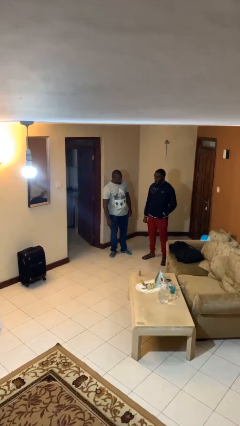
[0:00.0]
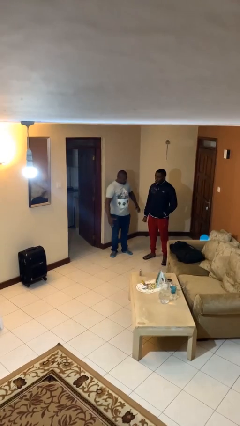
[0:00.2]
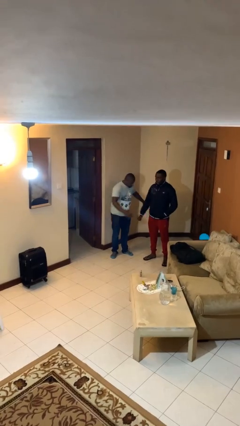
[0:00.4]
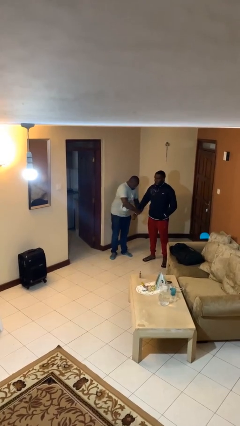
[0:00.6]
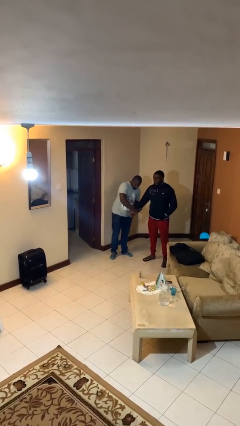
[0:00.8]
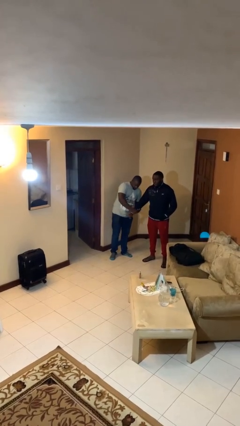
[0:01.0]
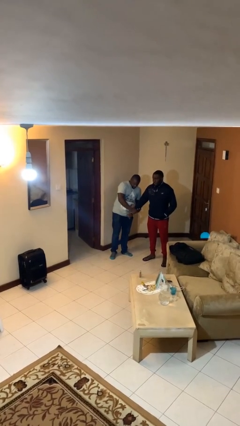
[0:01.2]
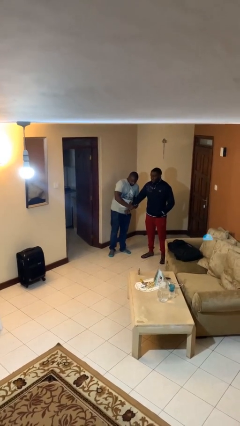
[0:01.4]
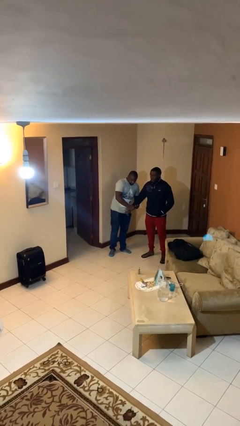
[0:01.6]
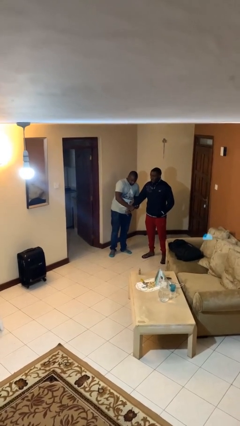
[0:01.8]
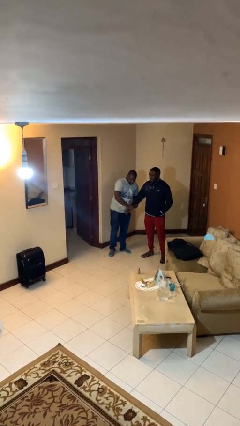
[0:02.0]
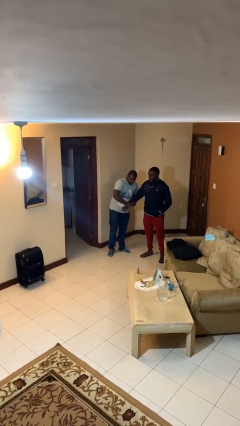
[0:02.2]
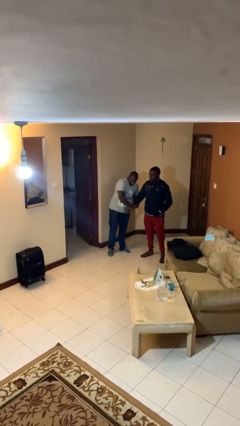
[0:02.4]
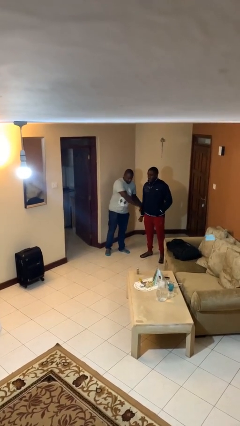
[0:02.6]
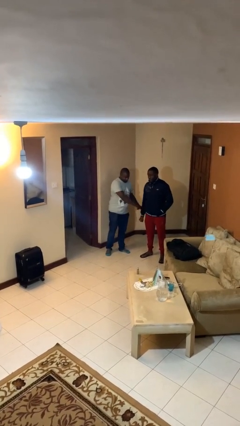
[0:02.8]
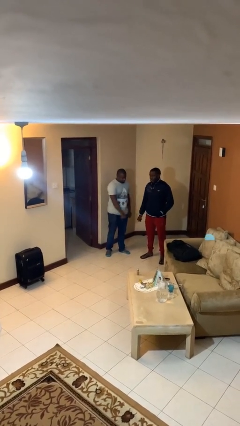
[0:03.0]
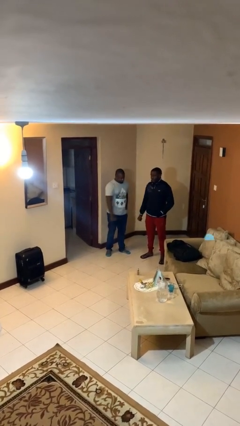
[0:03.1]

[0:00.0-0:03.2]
person grabs person by forearm

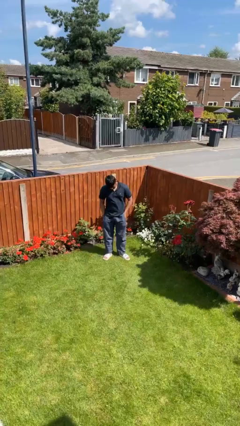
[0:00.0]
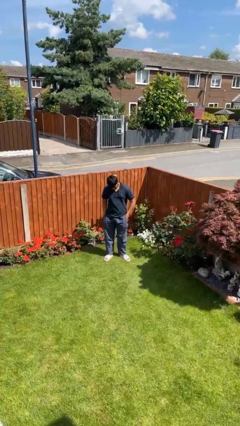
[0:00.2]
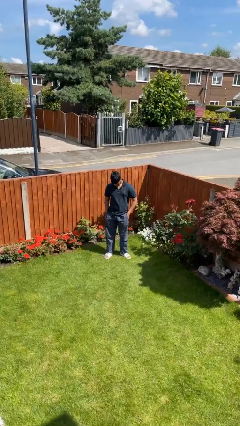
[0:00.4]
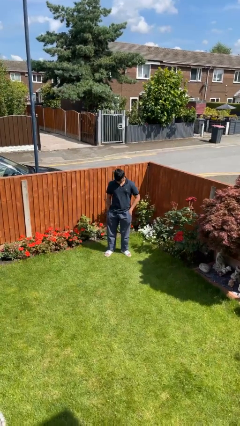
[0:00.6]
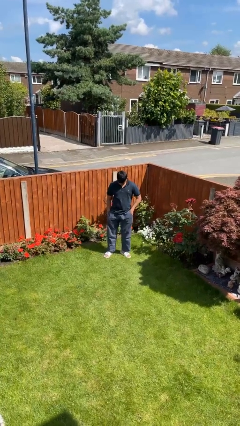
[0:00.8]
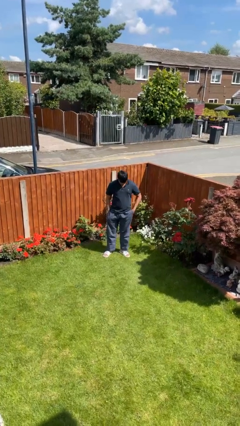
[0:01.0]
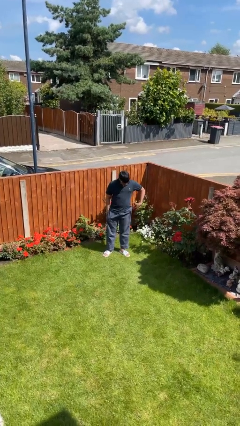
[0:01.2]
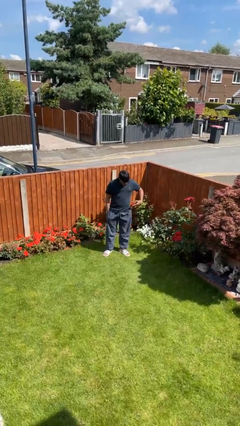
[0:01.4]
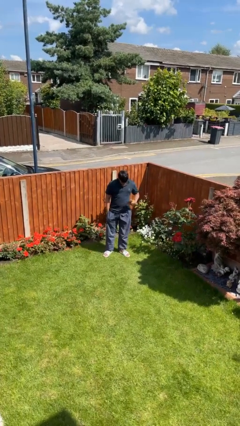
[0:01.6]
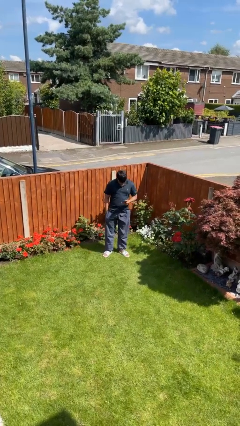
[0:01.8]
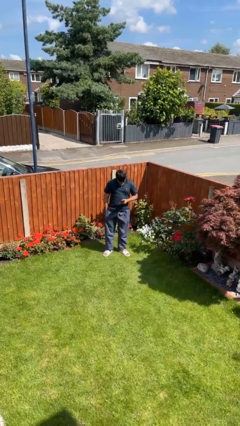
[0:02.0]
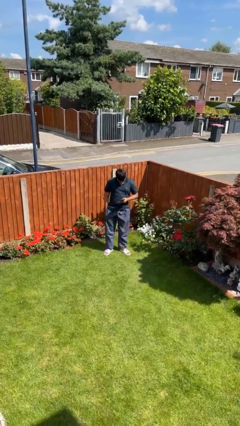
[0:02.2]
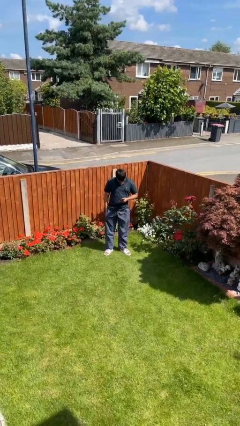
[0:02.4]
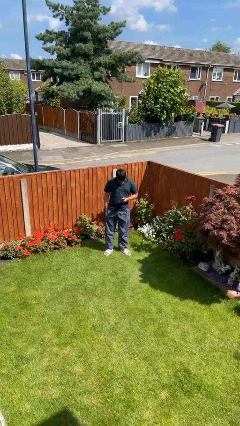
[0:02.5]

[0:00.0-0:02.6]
person takes phone from pocket

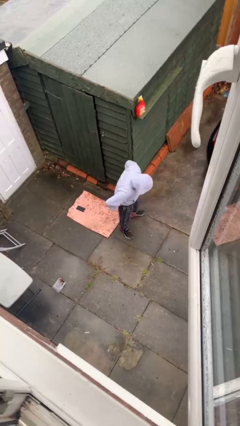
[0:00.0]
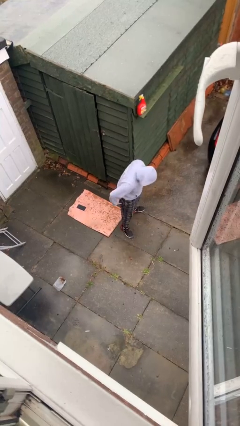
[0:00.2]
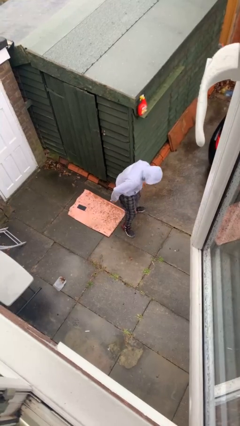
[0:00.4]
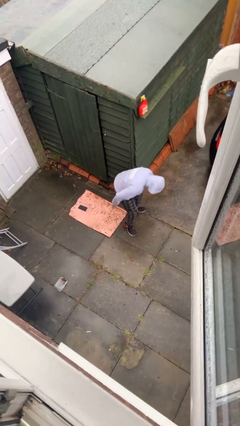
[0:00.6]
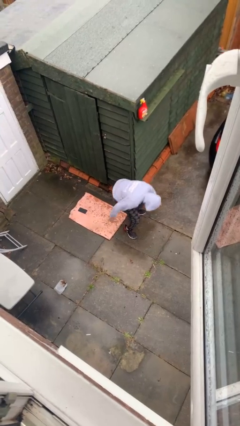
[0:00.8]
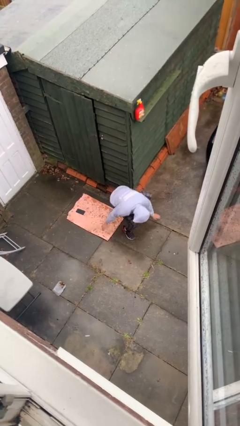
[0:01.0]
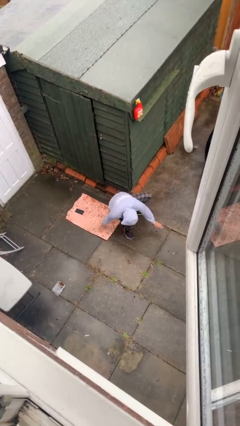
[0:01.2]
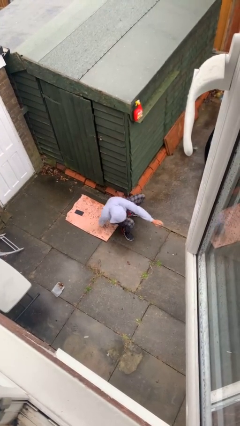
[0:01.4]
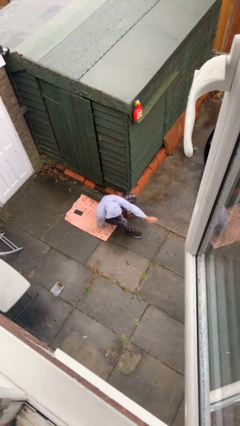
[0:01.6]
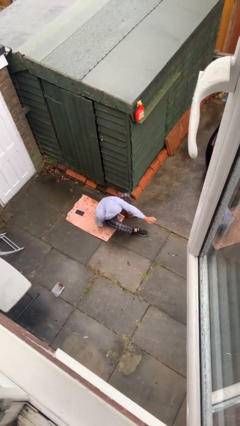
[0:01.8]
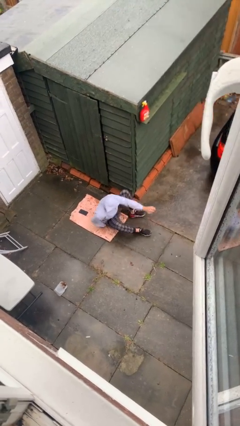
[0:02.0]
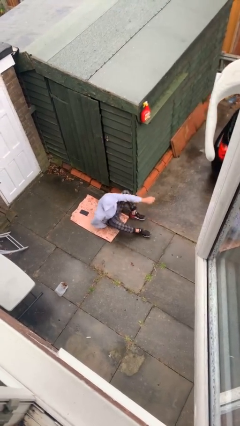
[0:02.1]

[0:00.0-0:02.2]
person sits down

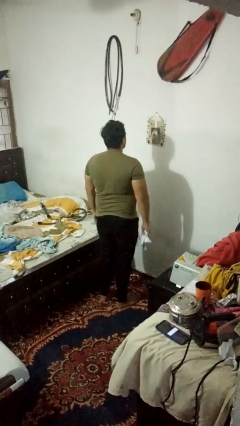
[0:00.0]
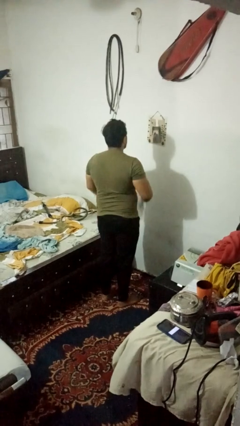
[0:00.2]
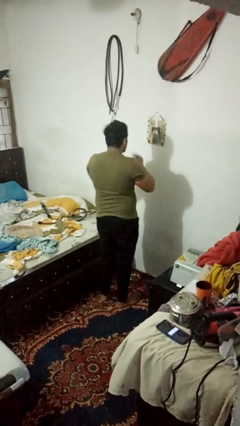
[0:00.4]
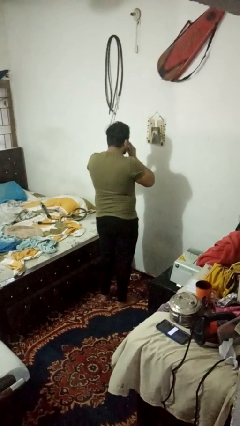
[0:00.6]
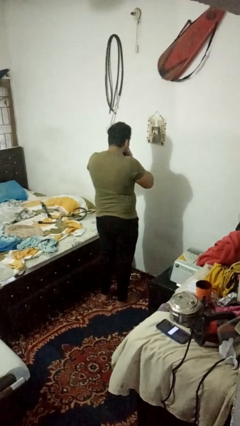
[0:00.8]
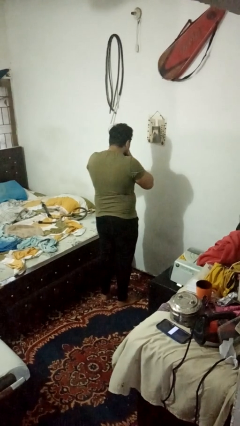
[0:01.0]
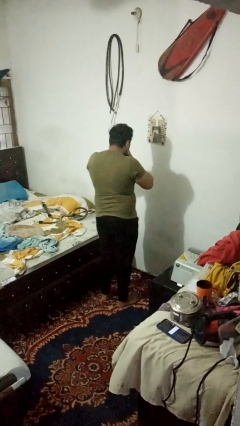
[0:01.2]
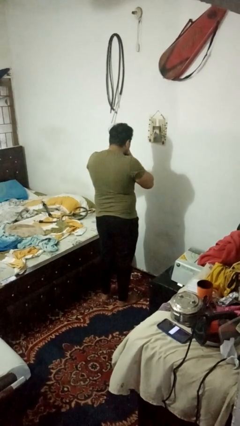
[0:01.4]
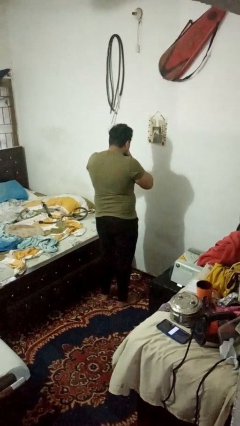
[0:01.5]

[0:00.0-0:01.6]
person blows nose

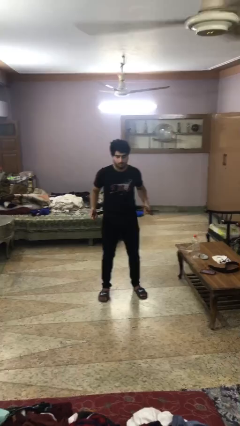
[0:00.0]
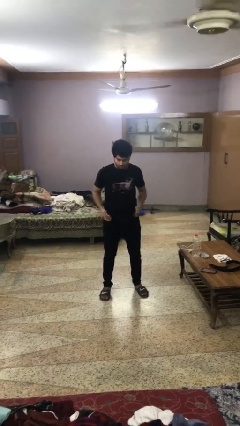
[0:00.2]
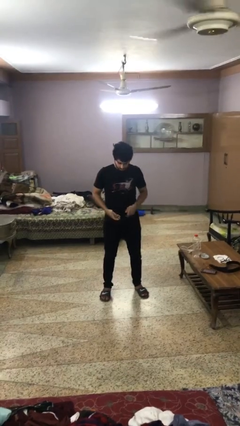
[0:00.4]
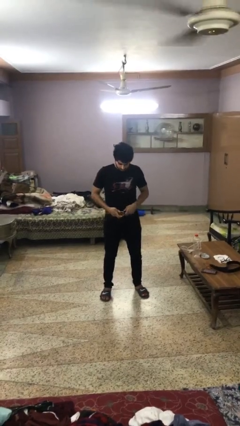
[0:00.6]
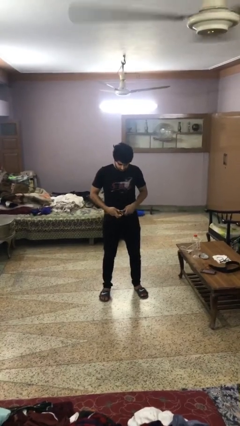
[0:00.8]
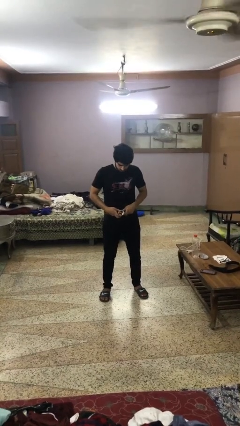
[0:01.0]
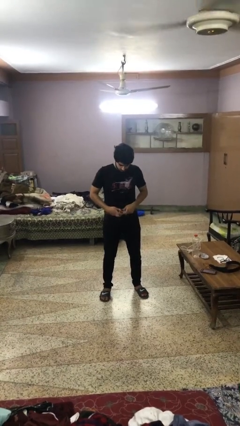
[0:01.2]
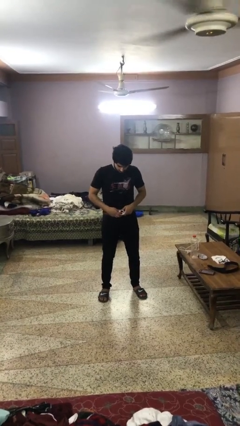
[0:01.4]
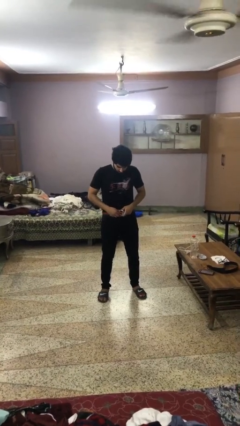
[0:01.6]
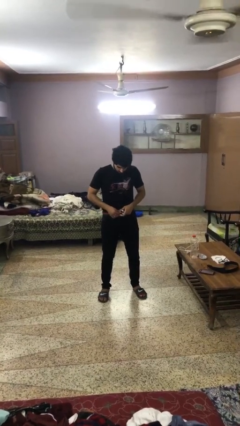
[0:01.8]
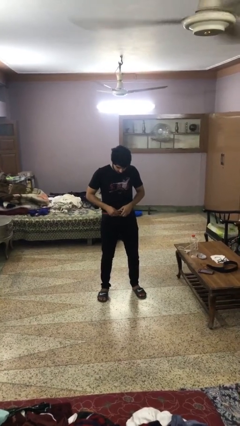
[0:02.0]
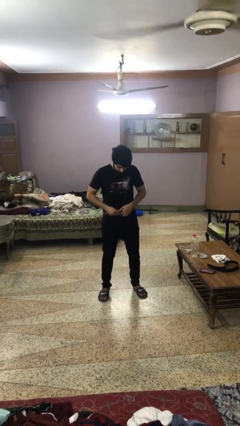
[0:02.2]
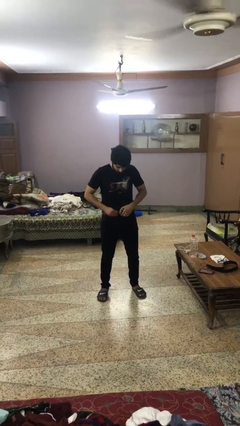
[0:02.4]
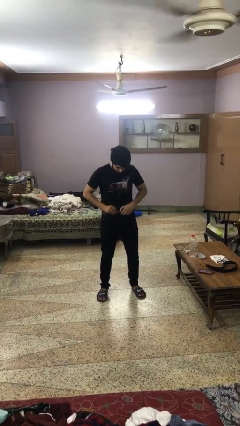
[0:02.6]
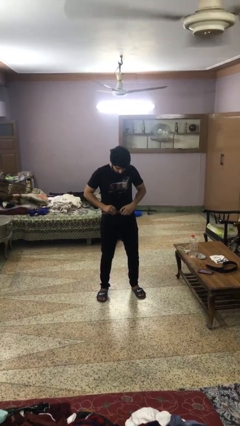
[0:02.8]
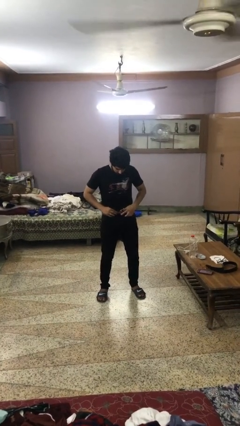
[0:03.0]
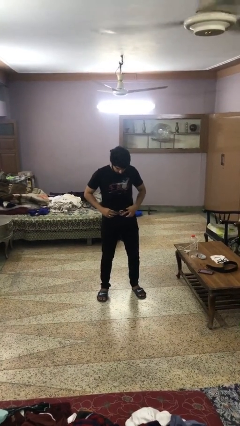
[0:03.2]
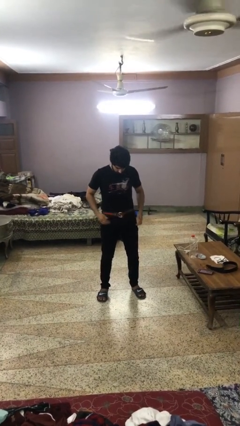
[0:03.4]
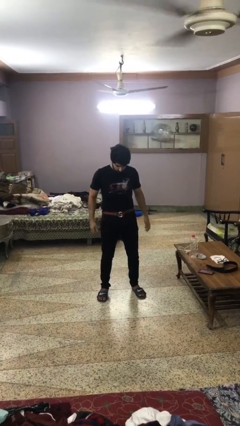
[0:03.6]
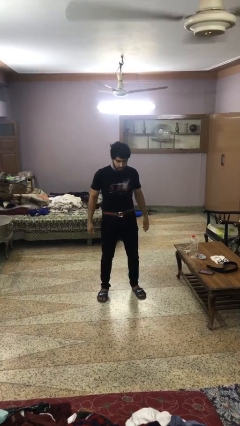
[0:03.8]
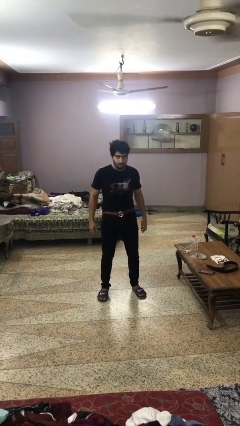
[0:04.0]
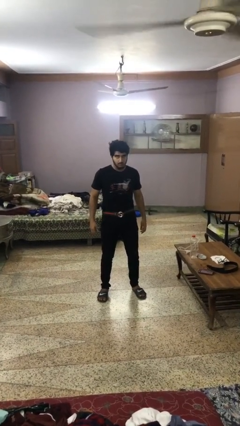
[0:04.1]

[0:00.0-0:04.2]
person puts on belt

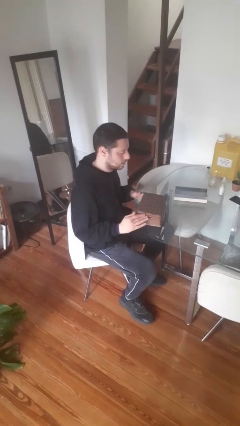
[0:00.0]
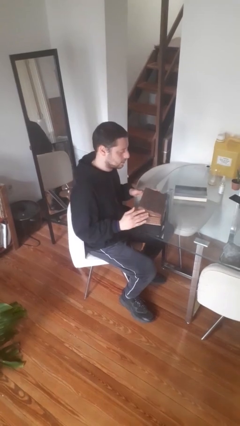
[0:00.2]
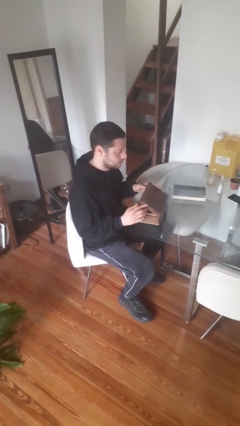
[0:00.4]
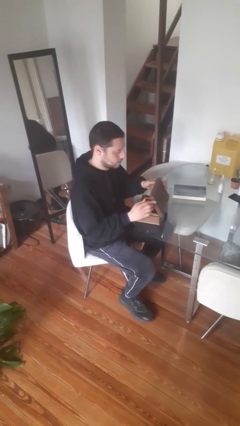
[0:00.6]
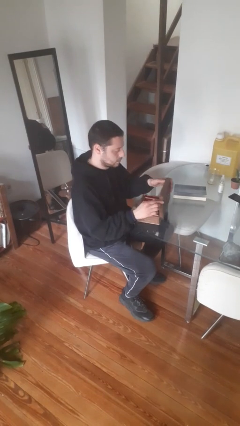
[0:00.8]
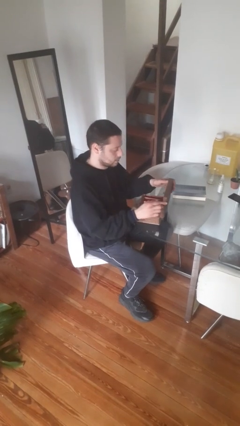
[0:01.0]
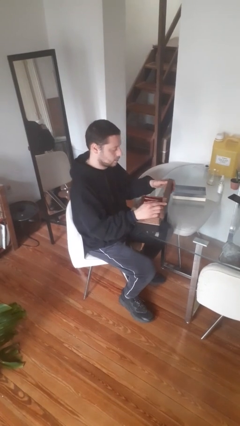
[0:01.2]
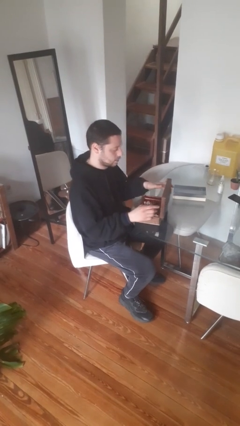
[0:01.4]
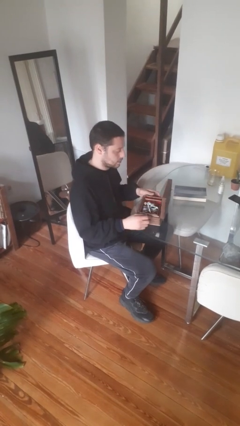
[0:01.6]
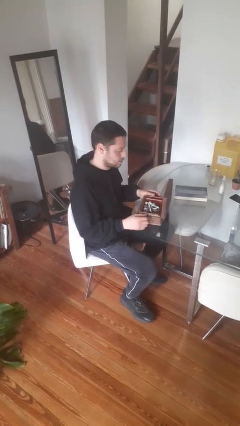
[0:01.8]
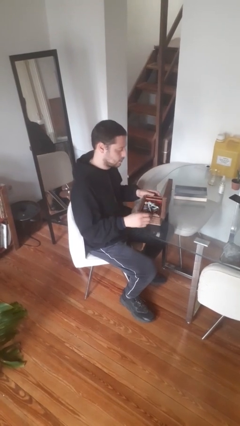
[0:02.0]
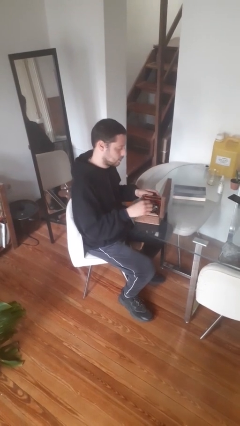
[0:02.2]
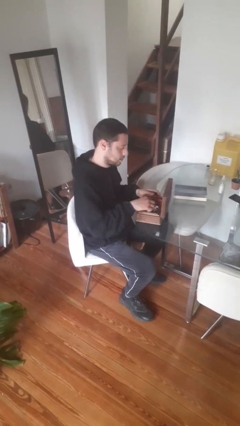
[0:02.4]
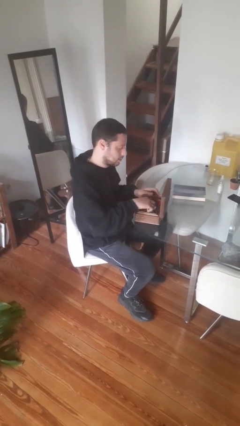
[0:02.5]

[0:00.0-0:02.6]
person opens jewelry box

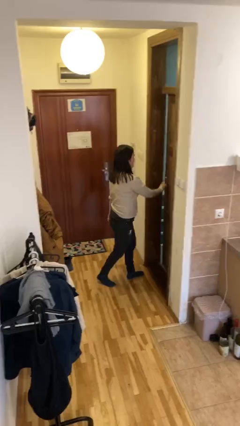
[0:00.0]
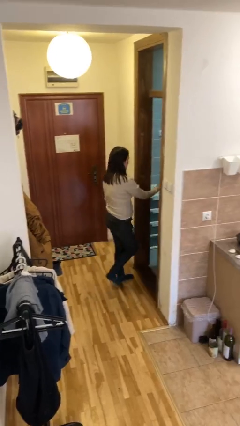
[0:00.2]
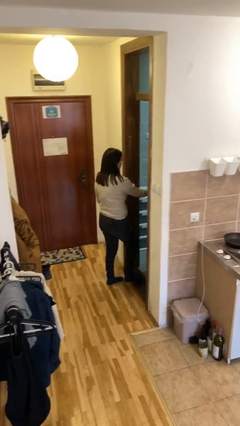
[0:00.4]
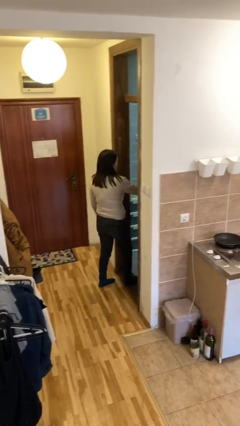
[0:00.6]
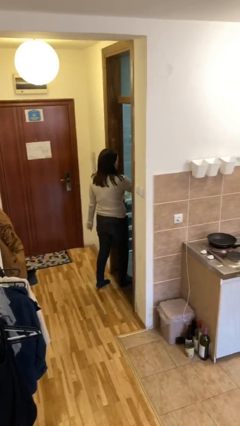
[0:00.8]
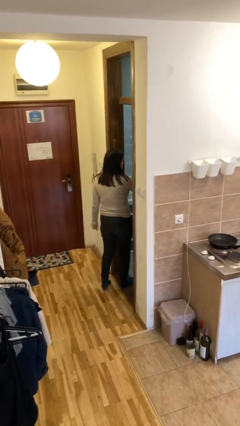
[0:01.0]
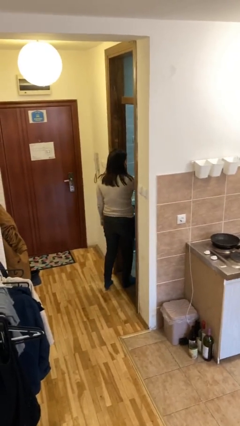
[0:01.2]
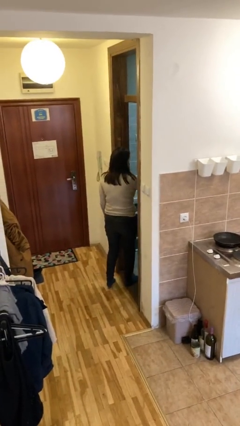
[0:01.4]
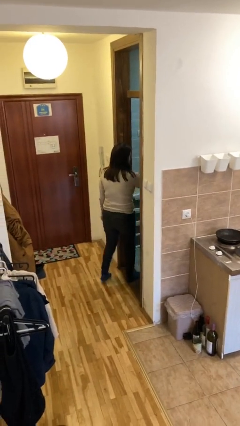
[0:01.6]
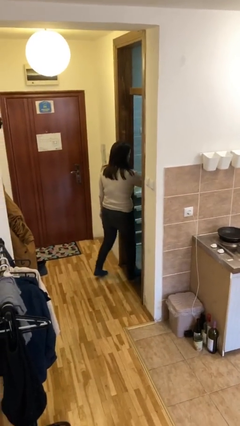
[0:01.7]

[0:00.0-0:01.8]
person opens facility door
